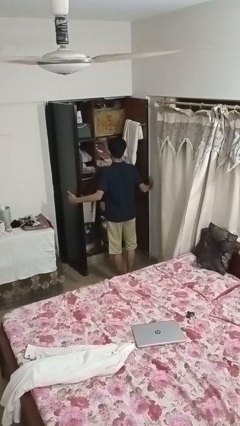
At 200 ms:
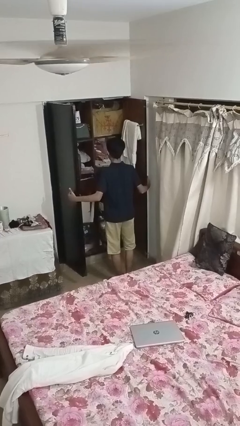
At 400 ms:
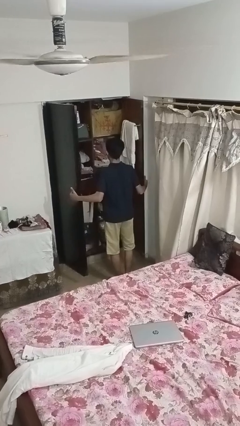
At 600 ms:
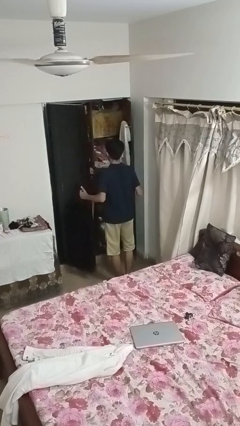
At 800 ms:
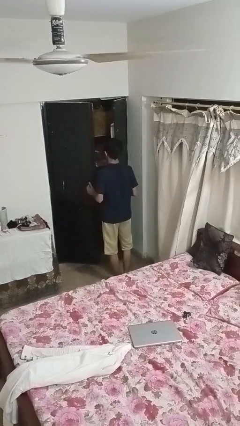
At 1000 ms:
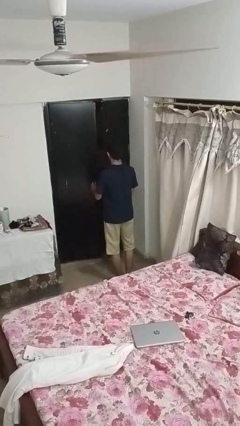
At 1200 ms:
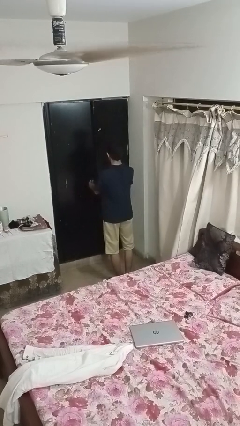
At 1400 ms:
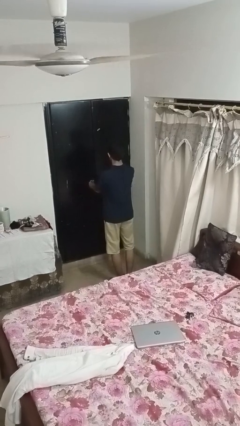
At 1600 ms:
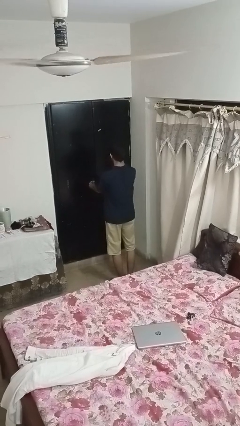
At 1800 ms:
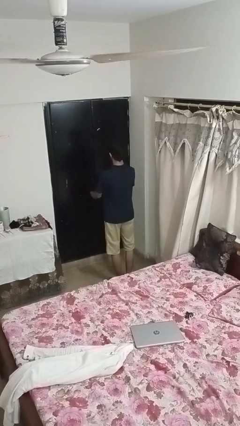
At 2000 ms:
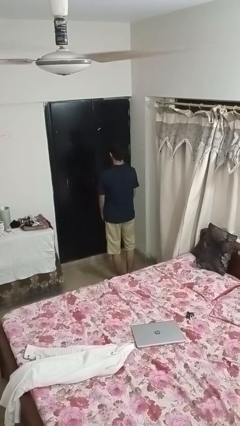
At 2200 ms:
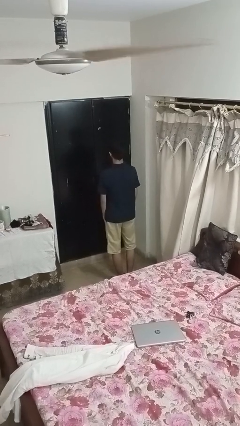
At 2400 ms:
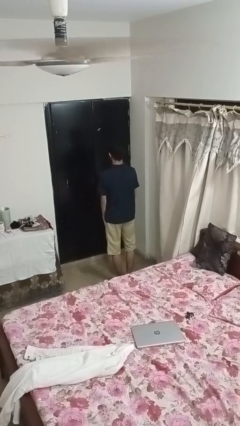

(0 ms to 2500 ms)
person closes closet door

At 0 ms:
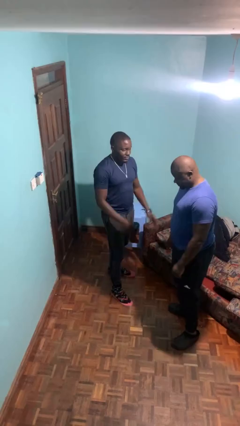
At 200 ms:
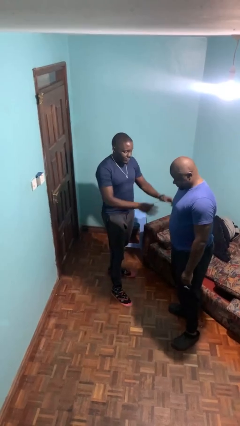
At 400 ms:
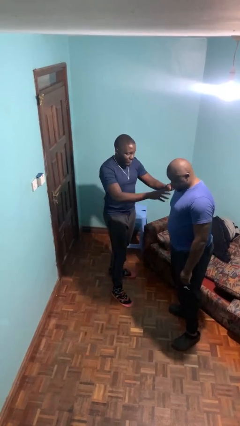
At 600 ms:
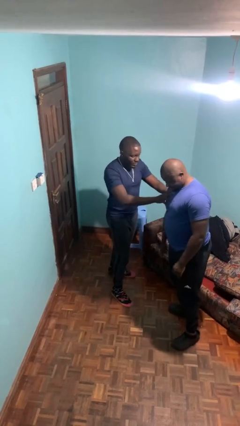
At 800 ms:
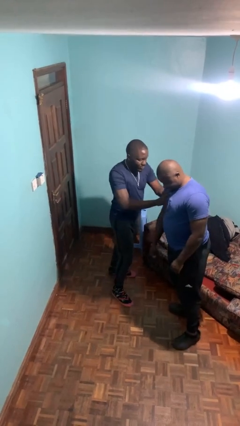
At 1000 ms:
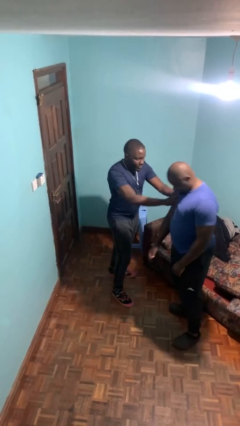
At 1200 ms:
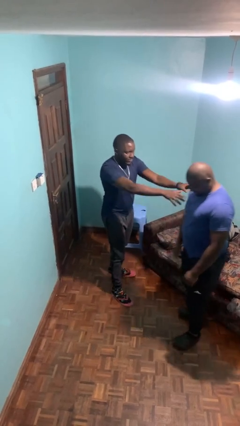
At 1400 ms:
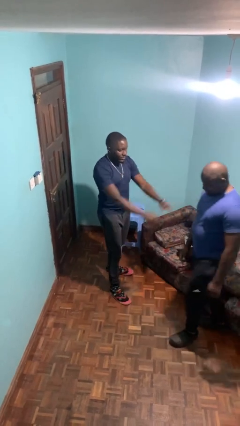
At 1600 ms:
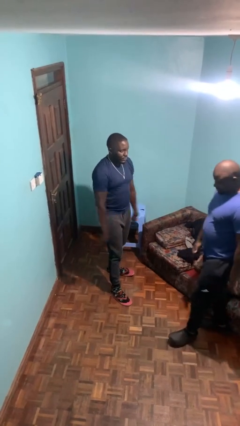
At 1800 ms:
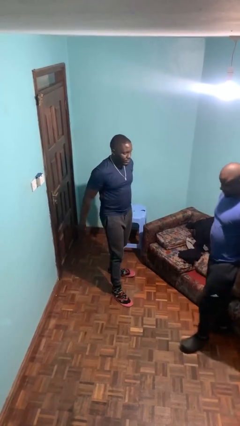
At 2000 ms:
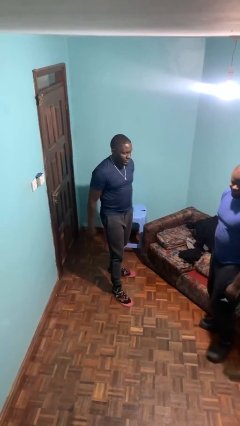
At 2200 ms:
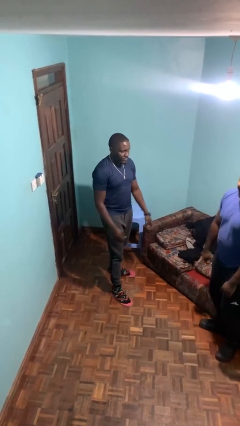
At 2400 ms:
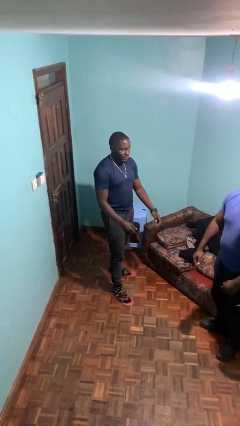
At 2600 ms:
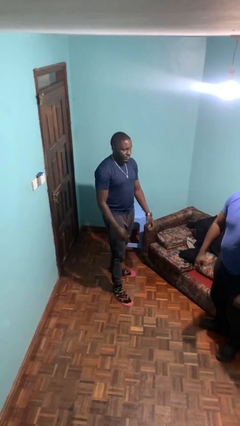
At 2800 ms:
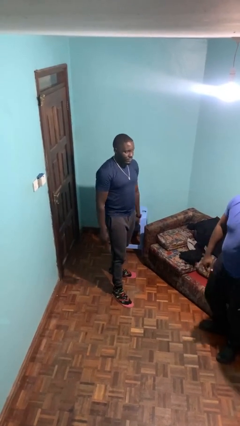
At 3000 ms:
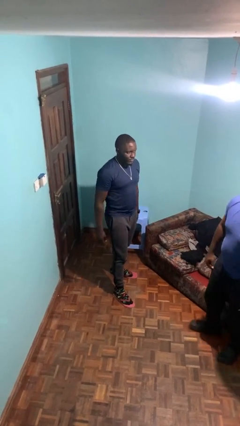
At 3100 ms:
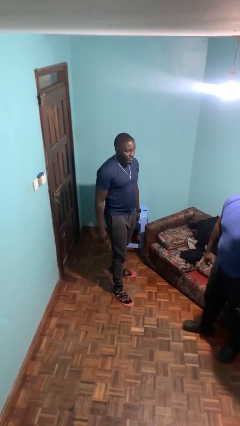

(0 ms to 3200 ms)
person shoves person

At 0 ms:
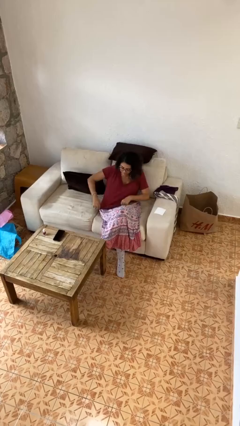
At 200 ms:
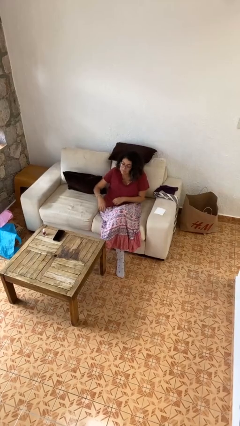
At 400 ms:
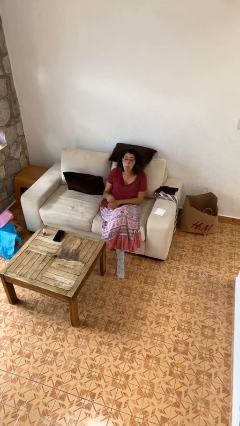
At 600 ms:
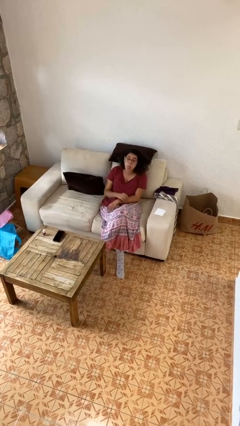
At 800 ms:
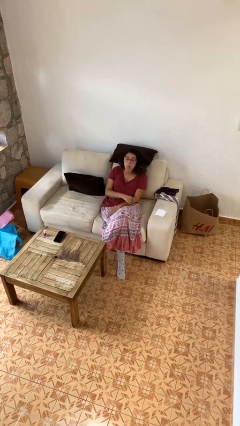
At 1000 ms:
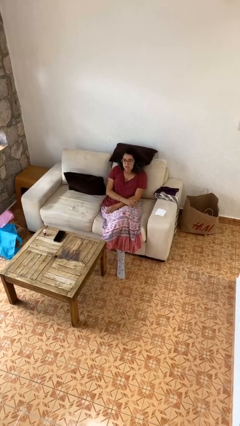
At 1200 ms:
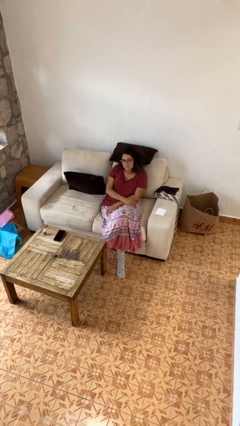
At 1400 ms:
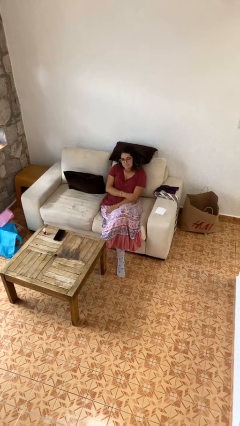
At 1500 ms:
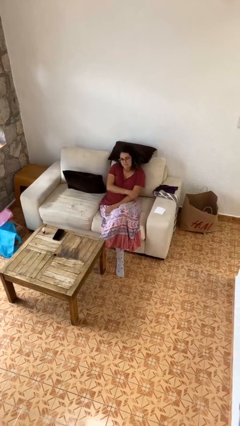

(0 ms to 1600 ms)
person sticks out tongue

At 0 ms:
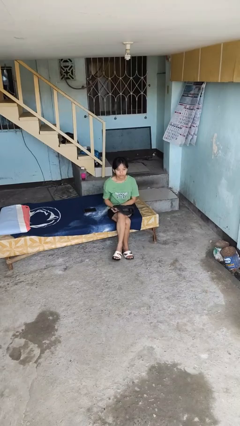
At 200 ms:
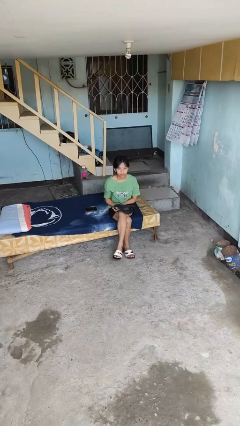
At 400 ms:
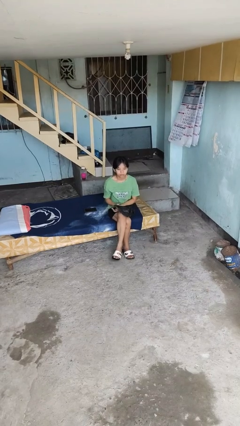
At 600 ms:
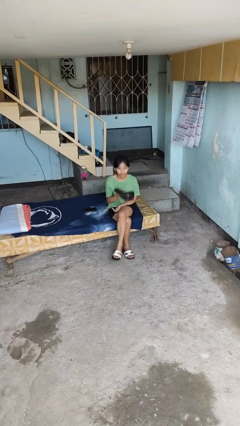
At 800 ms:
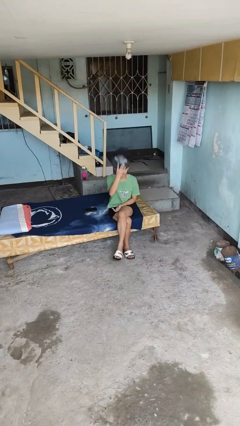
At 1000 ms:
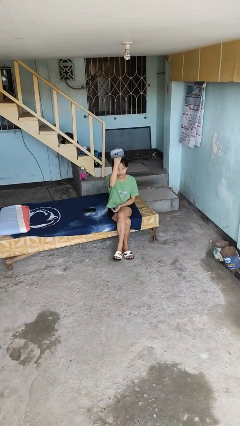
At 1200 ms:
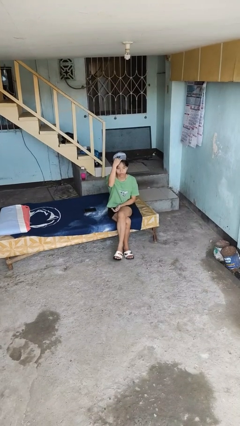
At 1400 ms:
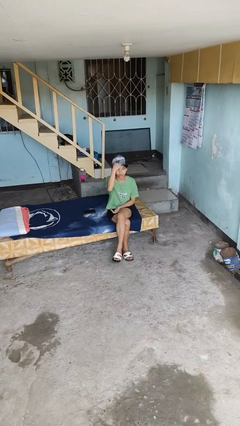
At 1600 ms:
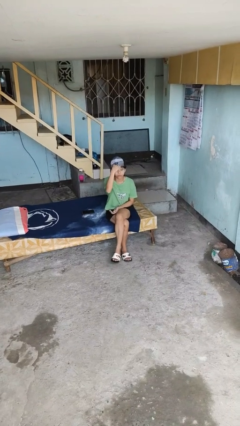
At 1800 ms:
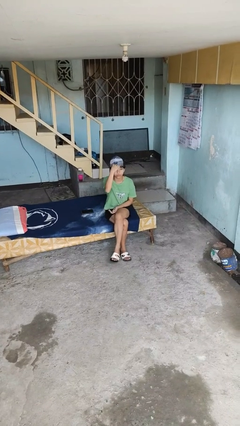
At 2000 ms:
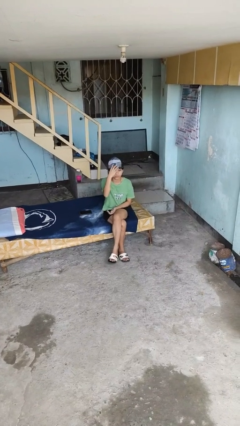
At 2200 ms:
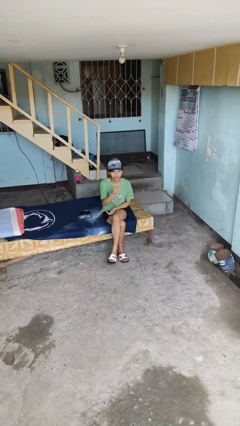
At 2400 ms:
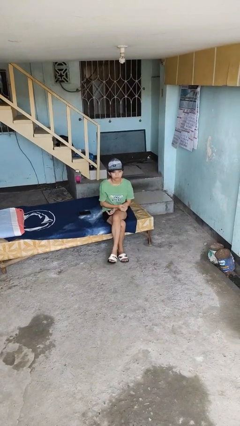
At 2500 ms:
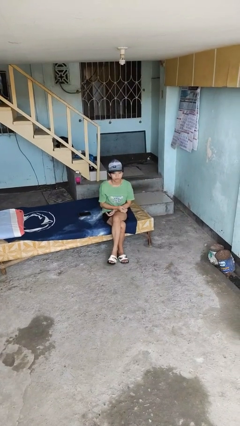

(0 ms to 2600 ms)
person puts on hat

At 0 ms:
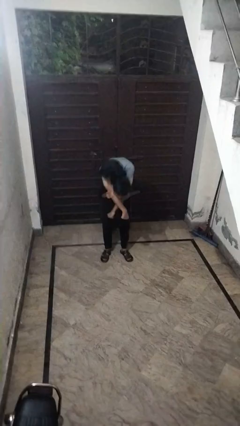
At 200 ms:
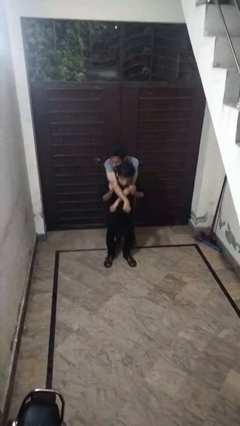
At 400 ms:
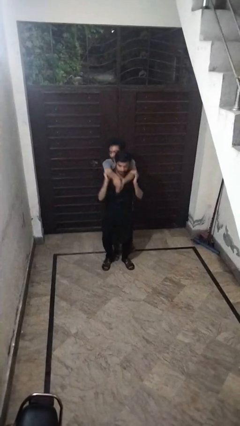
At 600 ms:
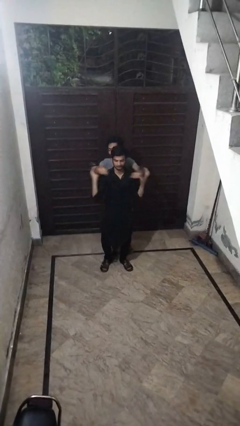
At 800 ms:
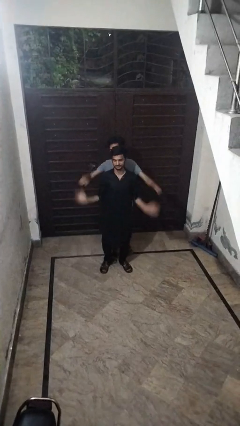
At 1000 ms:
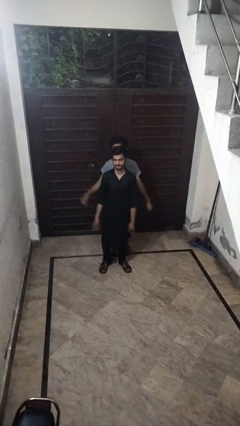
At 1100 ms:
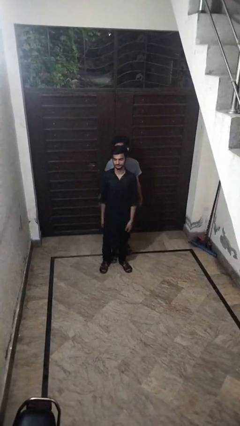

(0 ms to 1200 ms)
person puts down person

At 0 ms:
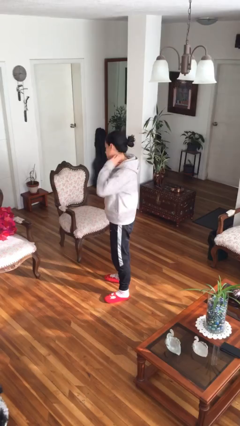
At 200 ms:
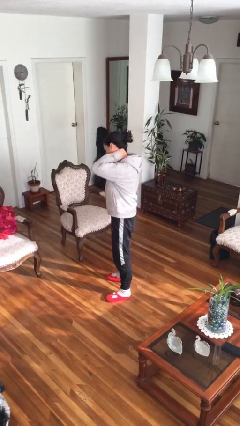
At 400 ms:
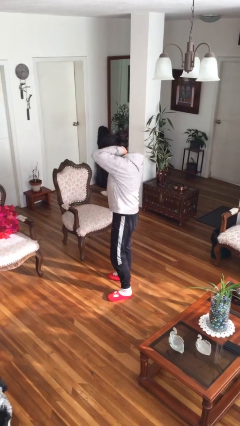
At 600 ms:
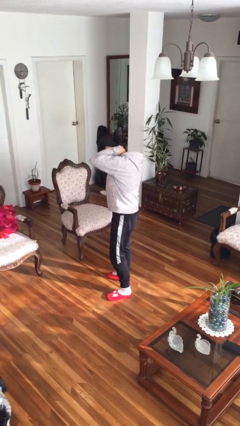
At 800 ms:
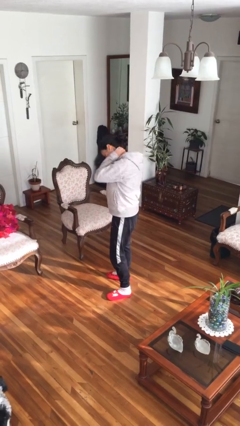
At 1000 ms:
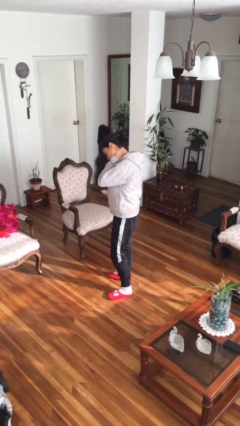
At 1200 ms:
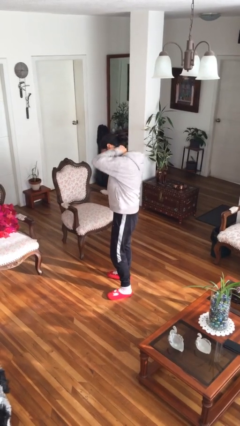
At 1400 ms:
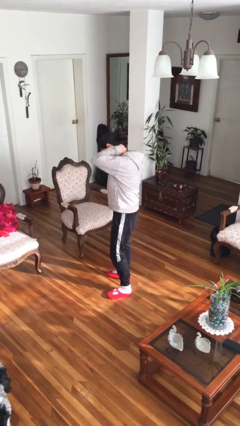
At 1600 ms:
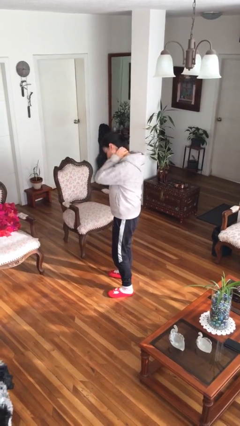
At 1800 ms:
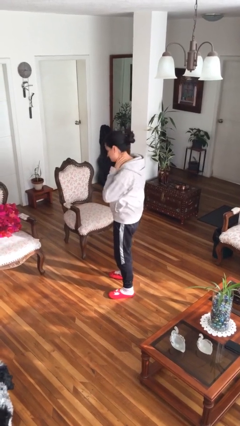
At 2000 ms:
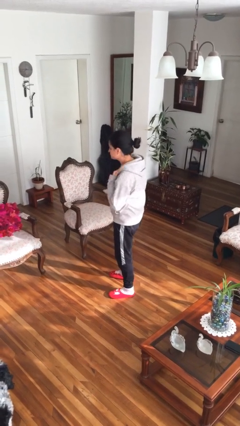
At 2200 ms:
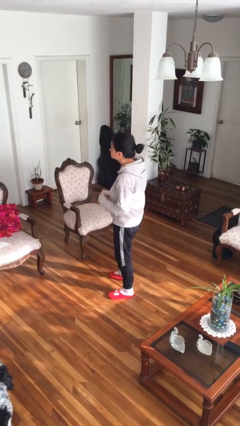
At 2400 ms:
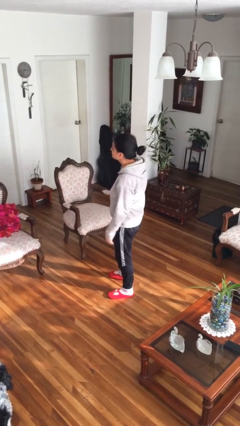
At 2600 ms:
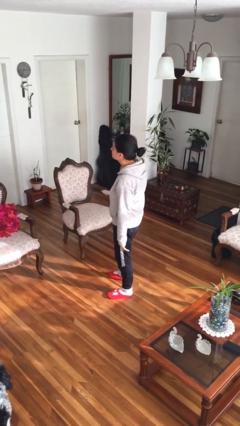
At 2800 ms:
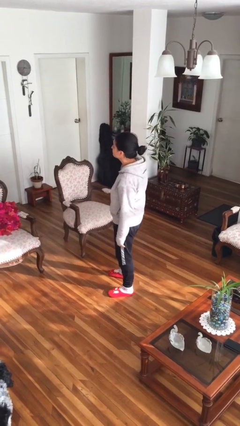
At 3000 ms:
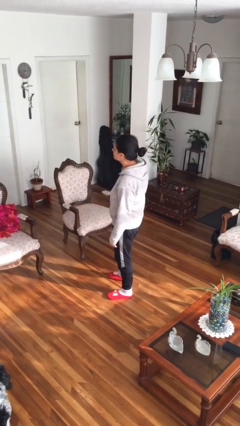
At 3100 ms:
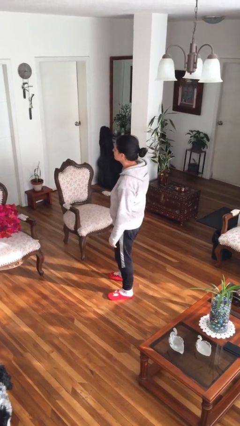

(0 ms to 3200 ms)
person rubs neck

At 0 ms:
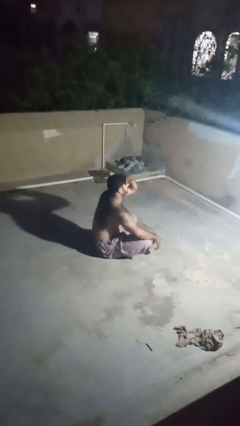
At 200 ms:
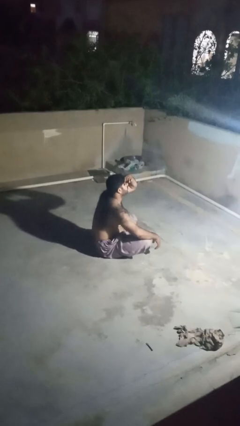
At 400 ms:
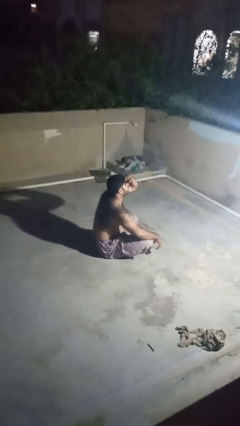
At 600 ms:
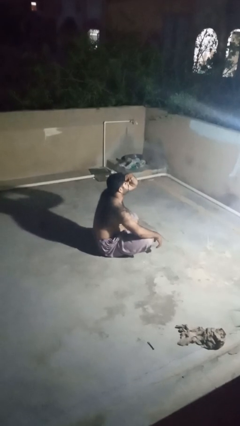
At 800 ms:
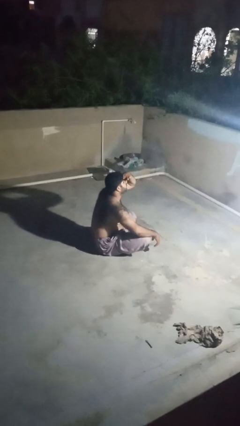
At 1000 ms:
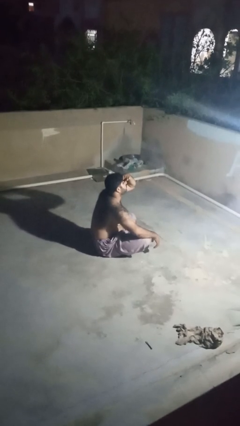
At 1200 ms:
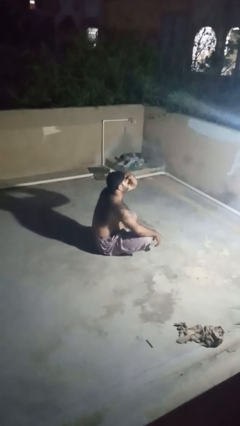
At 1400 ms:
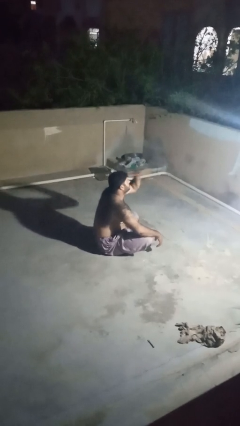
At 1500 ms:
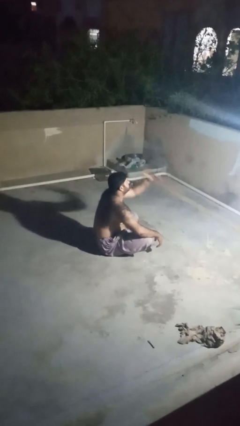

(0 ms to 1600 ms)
person shades eyes

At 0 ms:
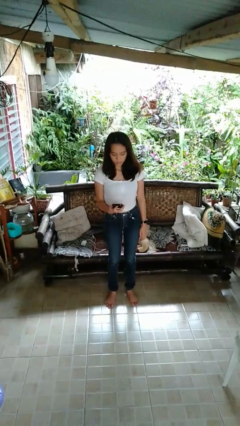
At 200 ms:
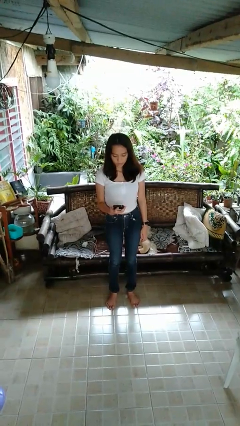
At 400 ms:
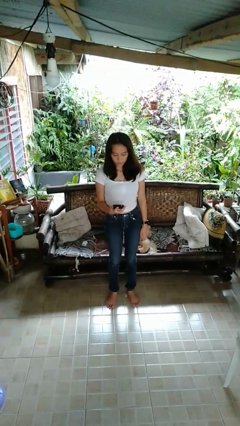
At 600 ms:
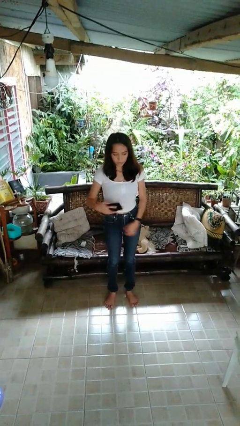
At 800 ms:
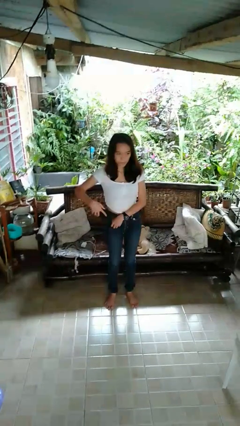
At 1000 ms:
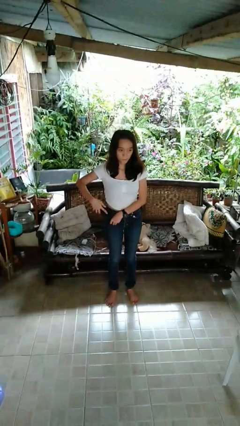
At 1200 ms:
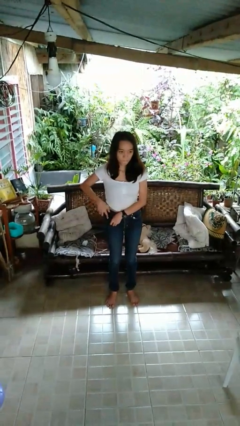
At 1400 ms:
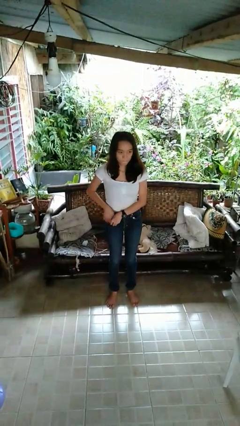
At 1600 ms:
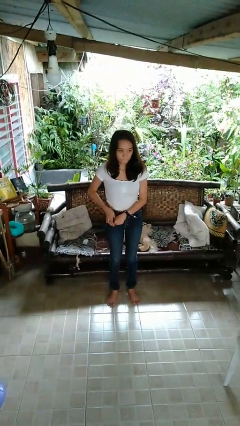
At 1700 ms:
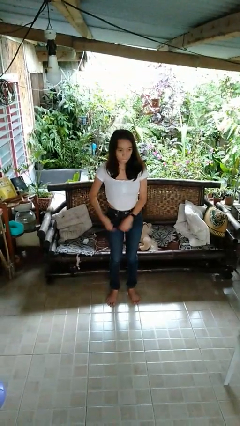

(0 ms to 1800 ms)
person puts phone into pocket
